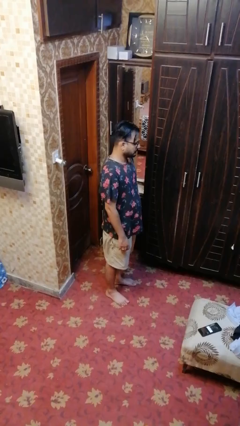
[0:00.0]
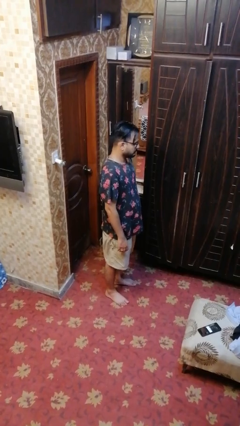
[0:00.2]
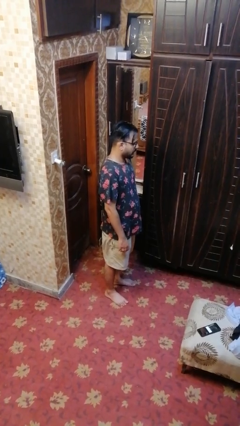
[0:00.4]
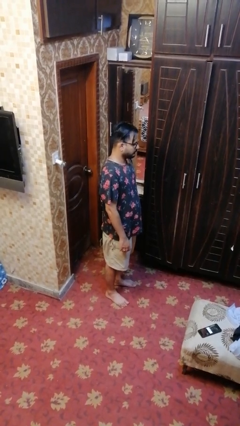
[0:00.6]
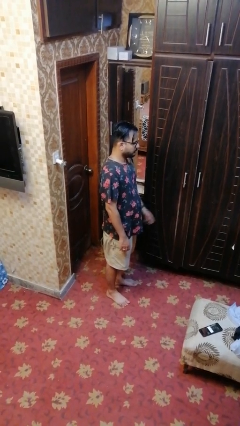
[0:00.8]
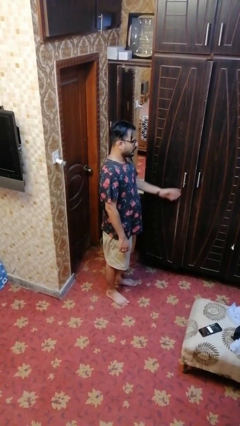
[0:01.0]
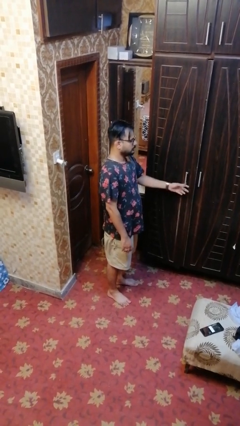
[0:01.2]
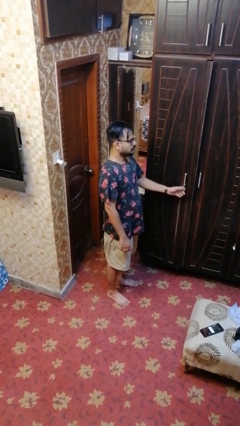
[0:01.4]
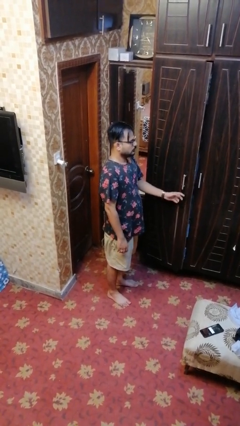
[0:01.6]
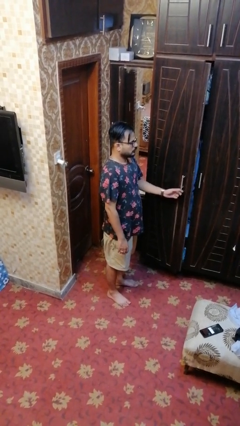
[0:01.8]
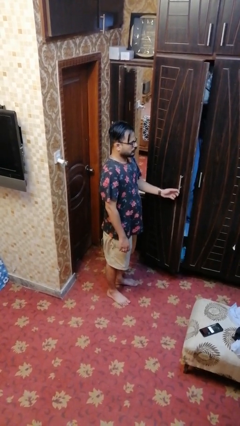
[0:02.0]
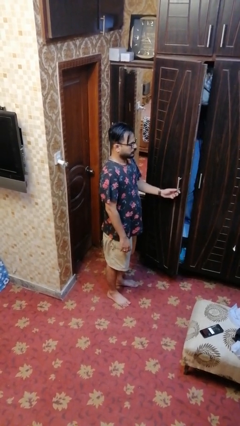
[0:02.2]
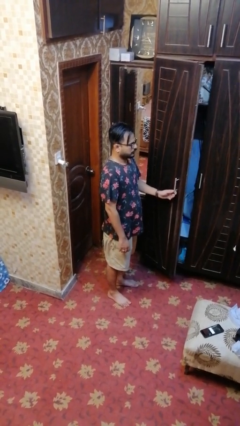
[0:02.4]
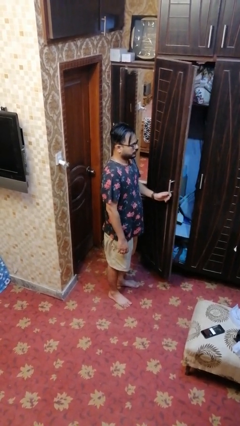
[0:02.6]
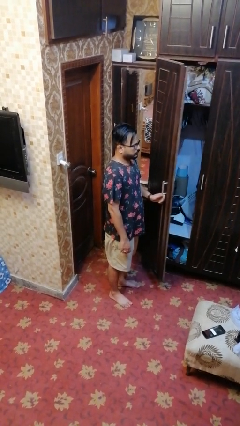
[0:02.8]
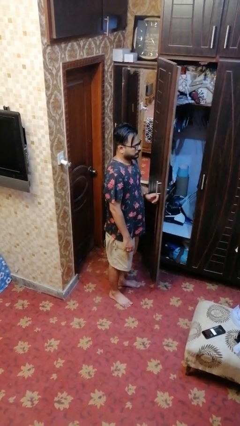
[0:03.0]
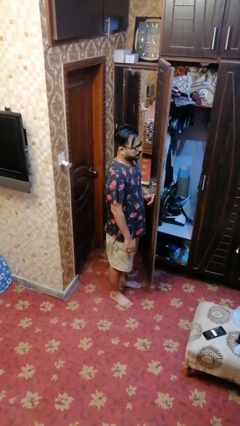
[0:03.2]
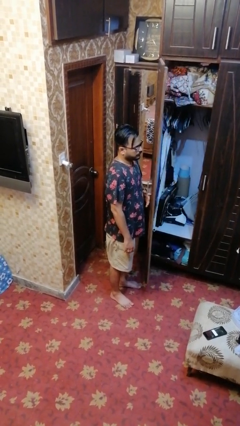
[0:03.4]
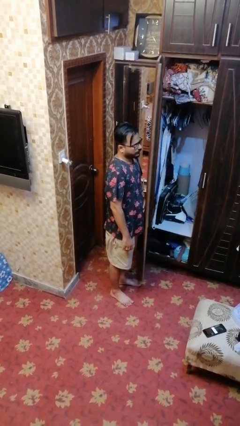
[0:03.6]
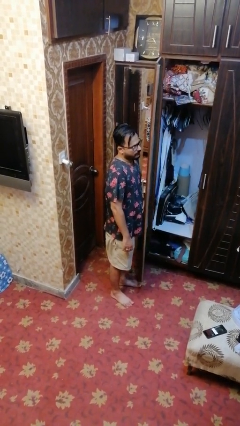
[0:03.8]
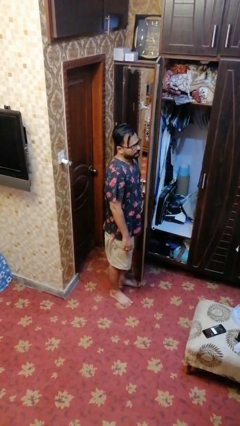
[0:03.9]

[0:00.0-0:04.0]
person opens closet door

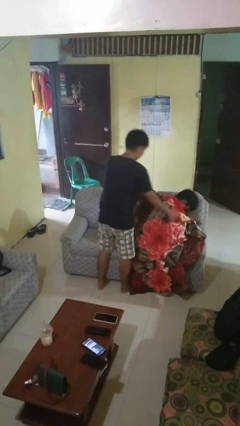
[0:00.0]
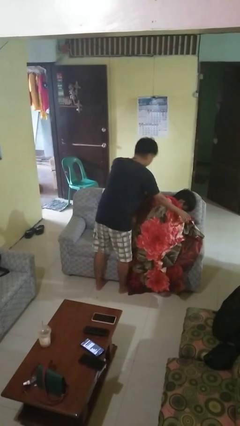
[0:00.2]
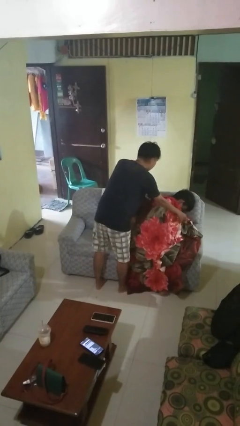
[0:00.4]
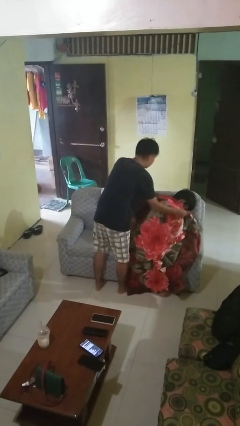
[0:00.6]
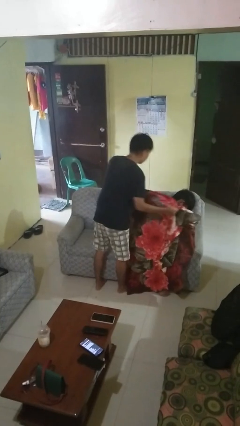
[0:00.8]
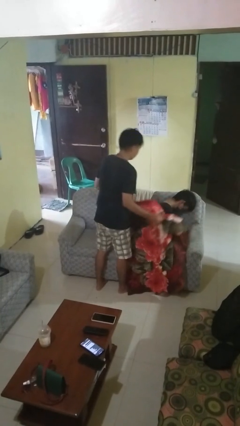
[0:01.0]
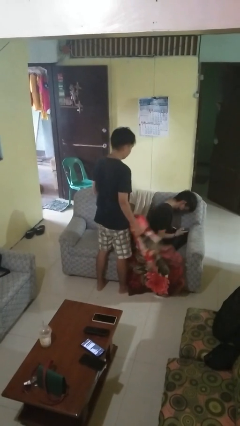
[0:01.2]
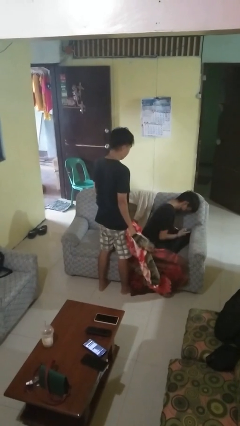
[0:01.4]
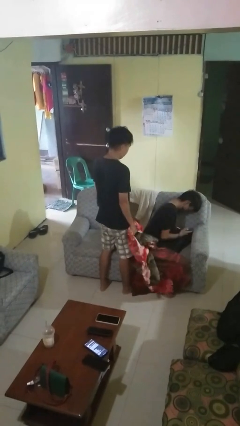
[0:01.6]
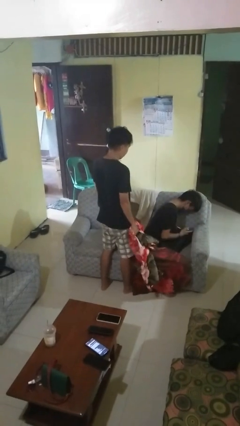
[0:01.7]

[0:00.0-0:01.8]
person uncovers friend with blanket

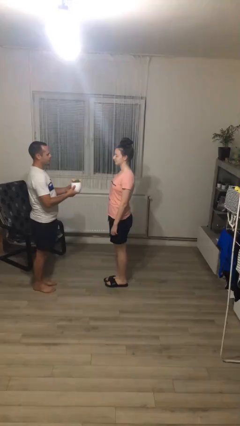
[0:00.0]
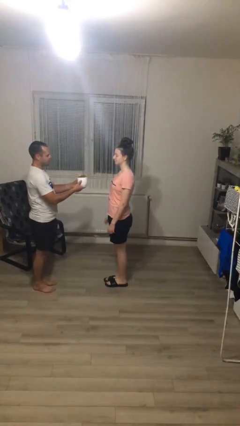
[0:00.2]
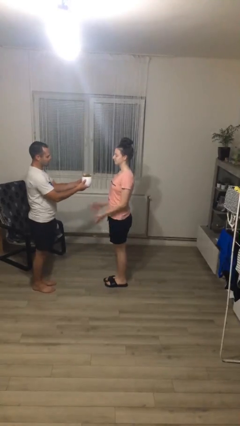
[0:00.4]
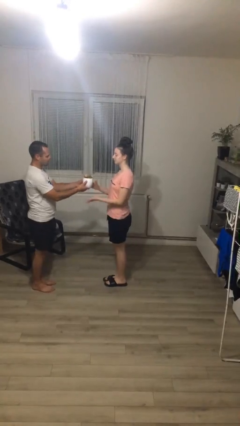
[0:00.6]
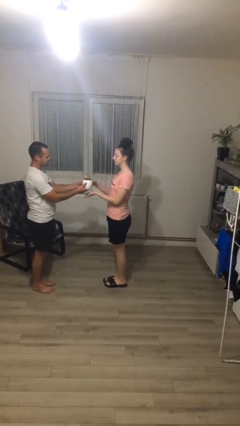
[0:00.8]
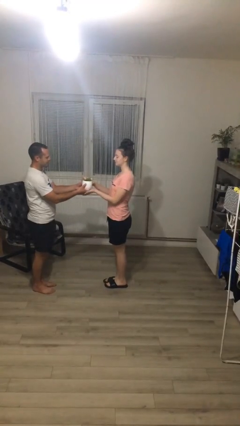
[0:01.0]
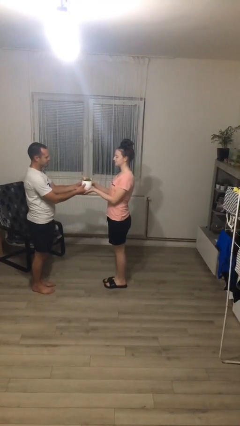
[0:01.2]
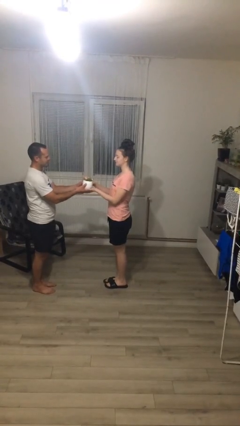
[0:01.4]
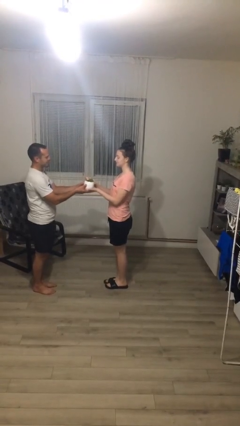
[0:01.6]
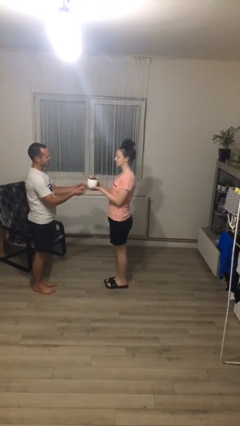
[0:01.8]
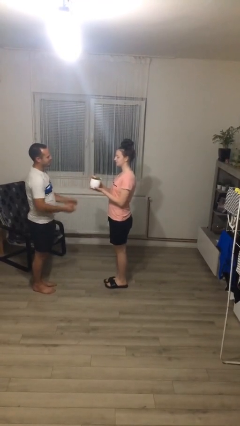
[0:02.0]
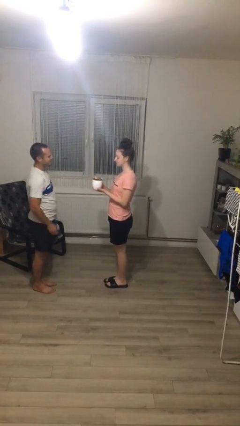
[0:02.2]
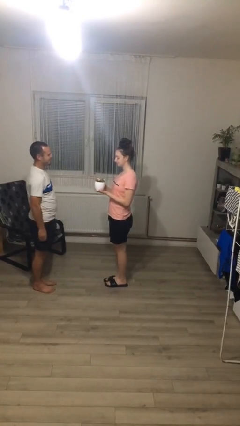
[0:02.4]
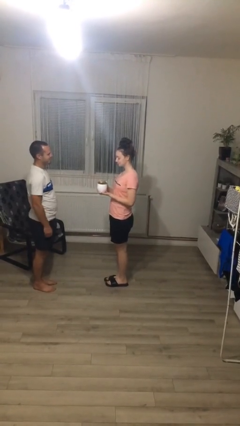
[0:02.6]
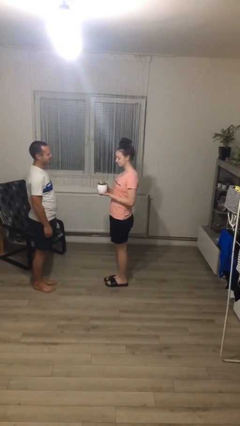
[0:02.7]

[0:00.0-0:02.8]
person transfers object to person

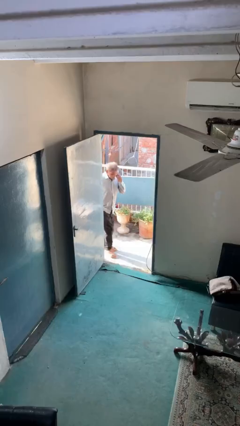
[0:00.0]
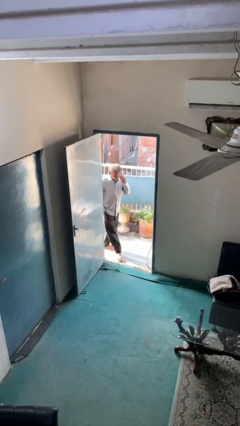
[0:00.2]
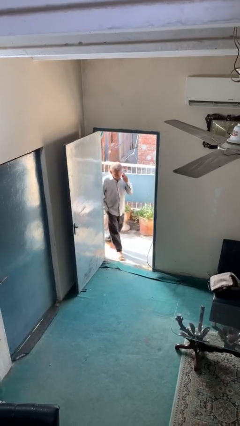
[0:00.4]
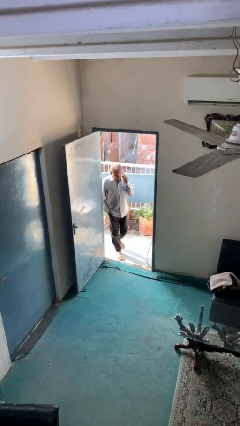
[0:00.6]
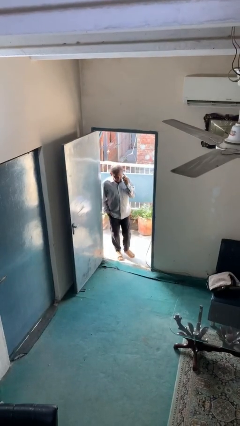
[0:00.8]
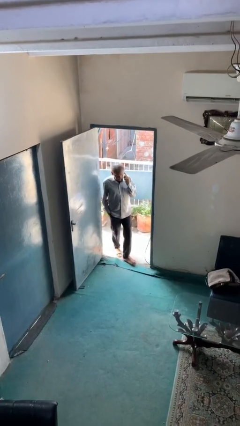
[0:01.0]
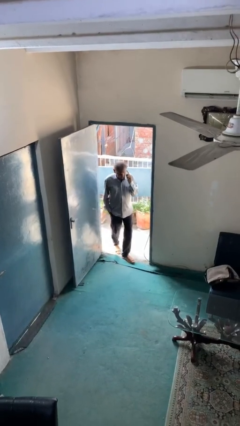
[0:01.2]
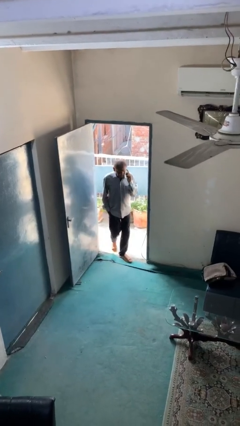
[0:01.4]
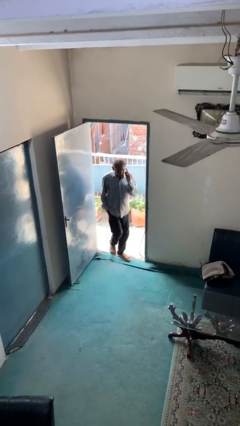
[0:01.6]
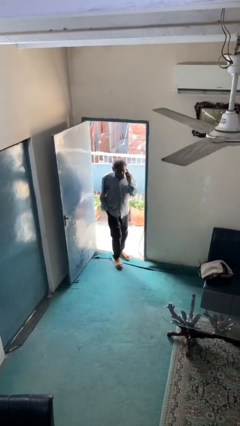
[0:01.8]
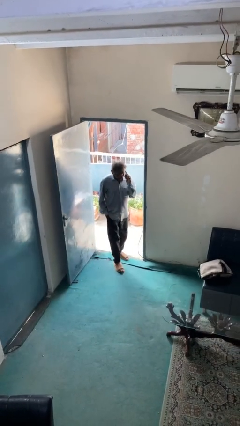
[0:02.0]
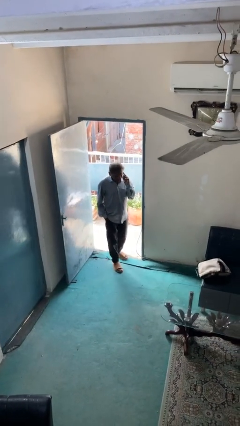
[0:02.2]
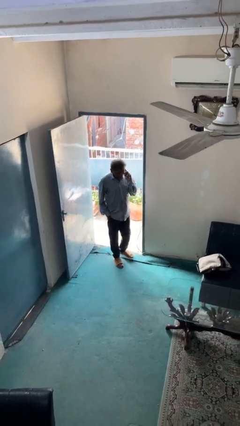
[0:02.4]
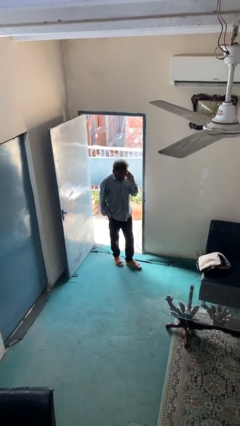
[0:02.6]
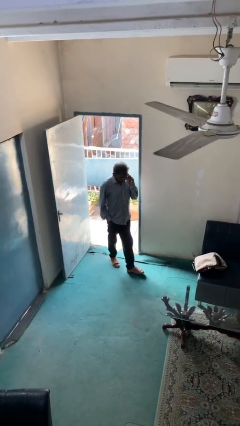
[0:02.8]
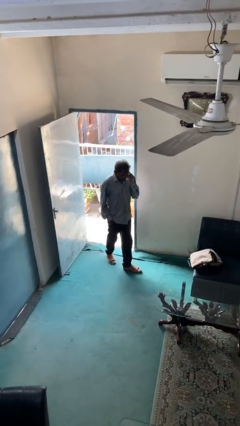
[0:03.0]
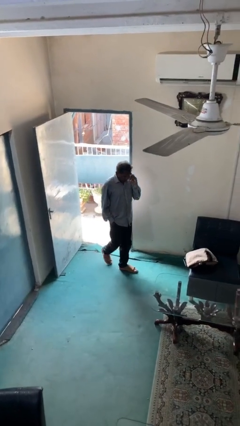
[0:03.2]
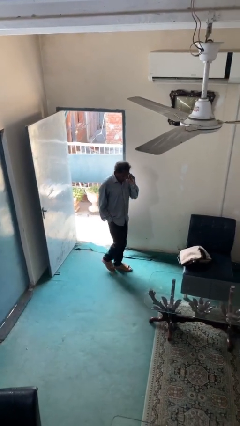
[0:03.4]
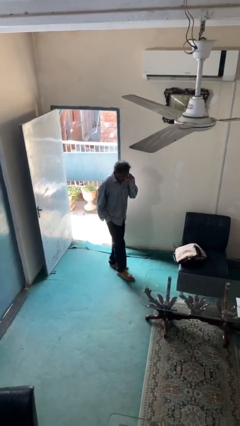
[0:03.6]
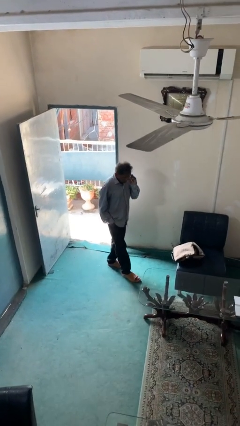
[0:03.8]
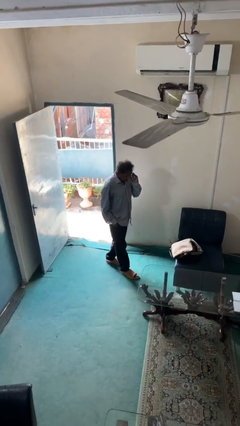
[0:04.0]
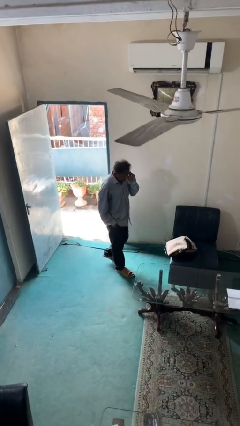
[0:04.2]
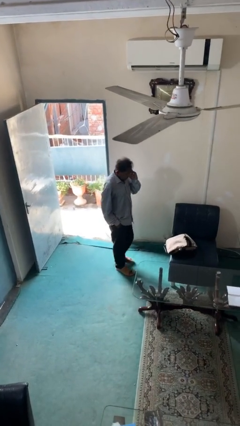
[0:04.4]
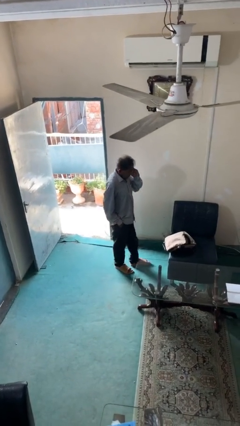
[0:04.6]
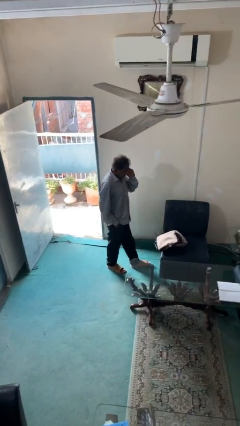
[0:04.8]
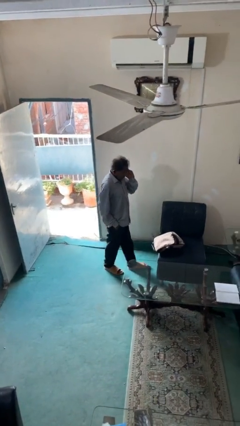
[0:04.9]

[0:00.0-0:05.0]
person enters scene through structure

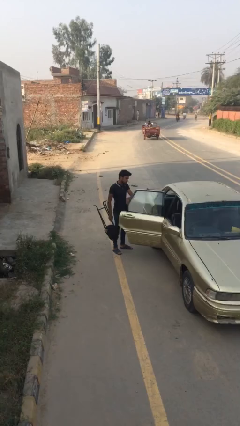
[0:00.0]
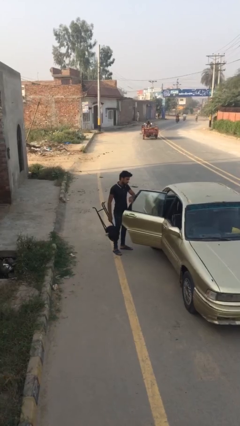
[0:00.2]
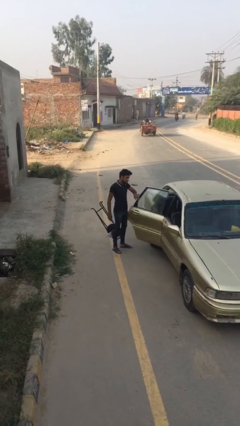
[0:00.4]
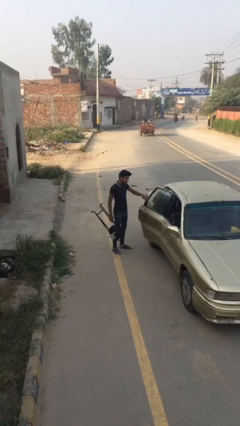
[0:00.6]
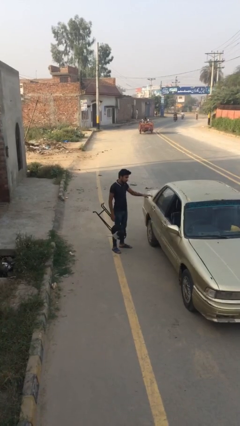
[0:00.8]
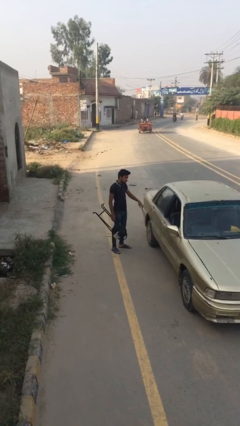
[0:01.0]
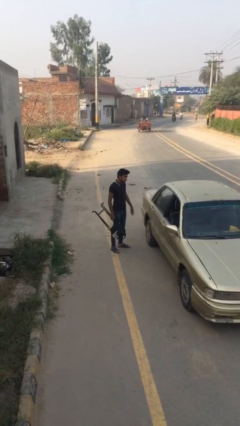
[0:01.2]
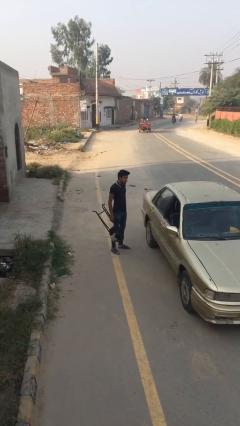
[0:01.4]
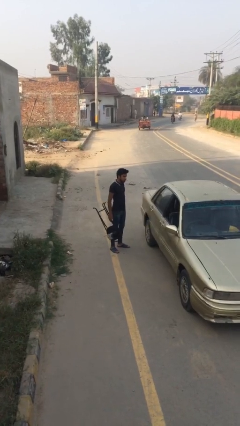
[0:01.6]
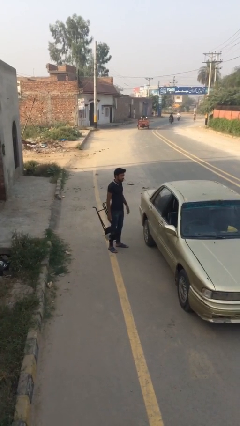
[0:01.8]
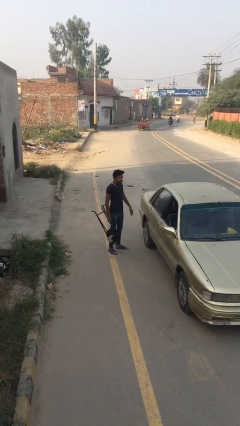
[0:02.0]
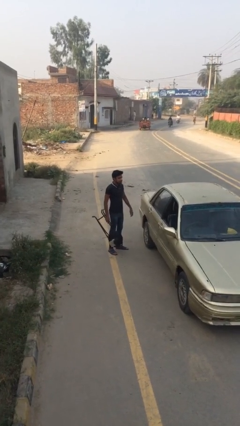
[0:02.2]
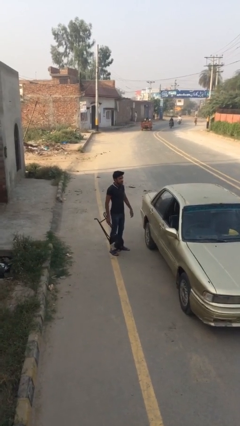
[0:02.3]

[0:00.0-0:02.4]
person closes car door

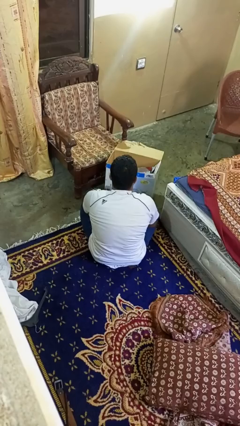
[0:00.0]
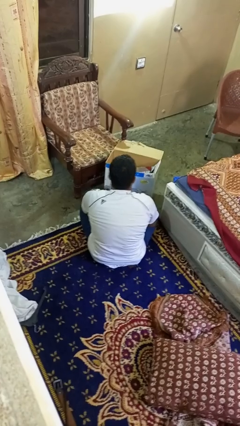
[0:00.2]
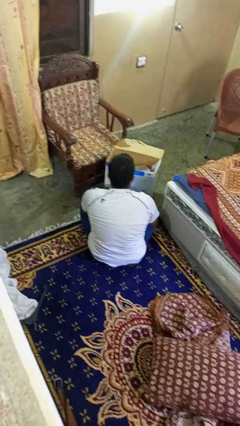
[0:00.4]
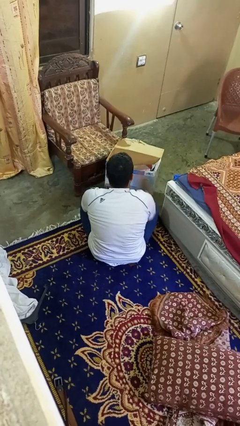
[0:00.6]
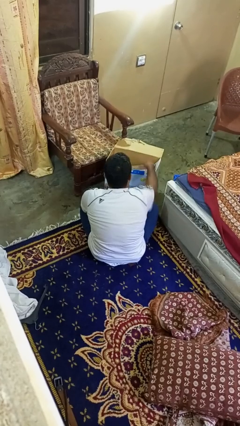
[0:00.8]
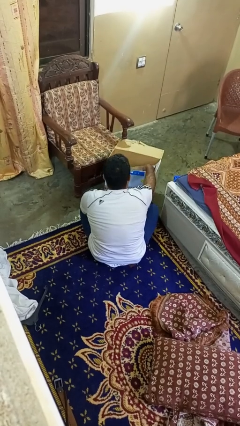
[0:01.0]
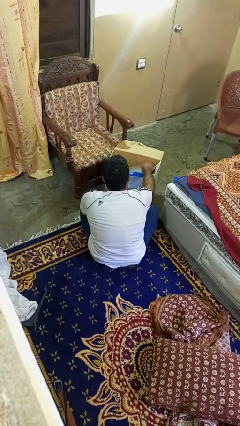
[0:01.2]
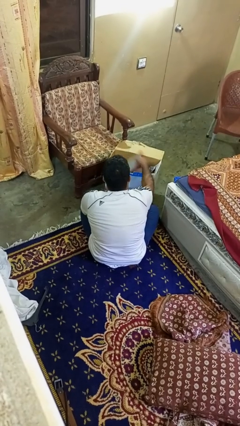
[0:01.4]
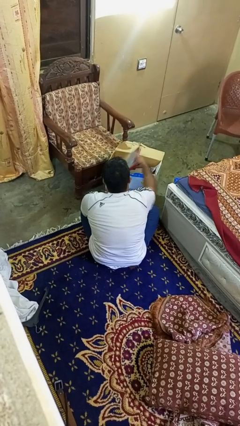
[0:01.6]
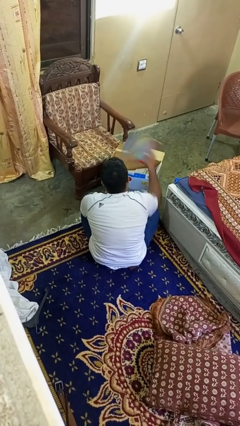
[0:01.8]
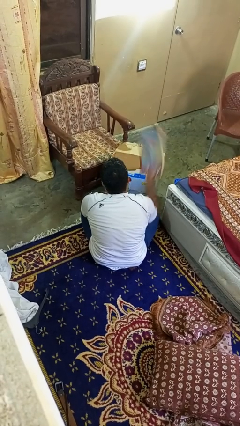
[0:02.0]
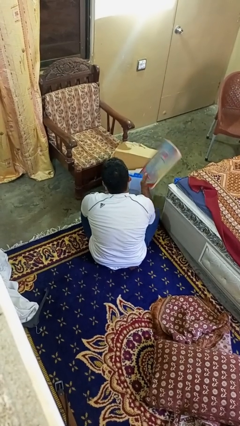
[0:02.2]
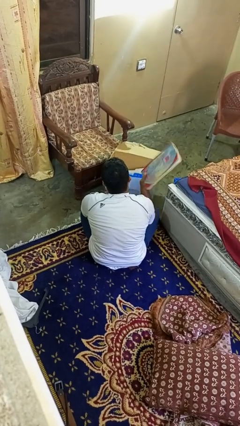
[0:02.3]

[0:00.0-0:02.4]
person takes object from box
